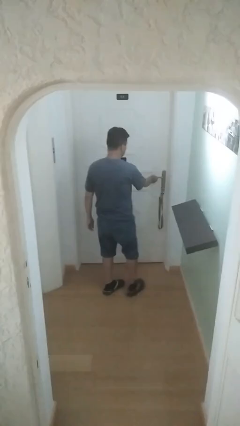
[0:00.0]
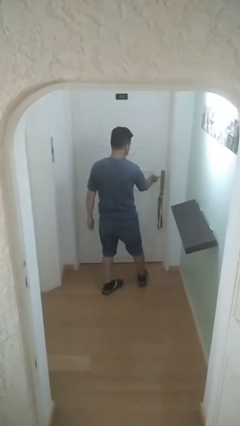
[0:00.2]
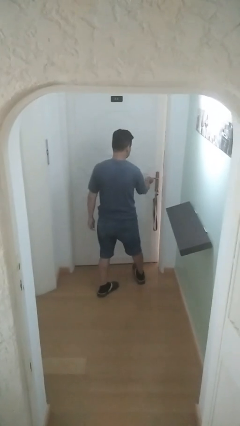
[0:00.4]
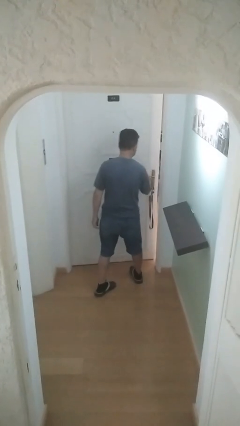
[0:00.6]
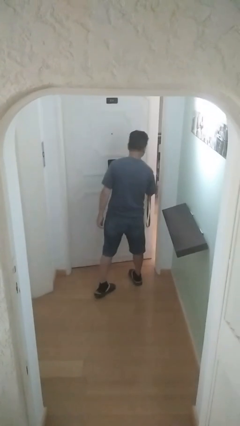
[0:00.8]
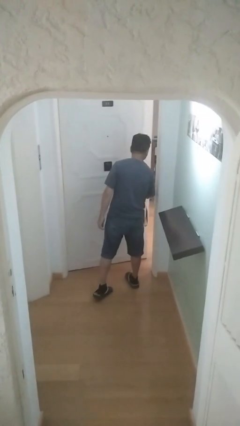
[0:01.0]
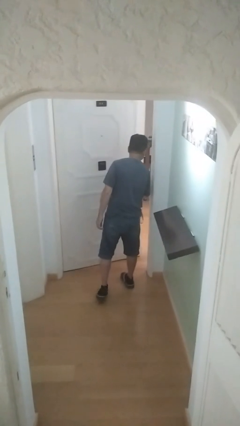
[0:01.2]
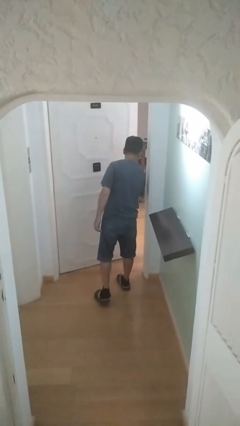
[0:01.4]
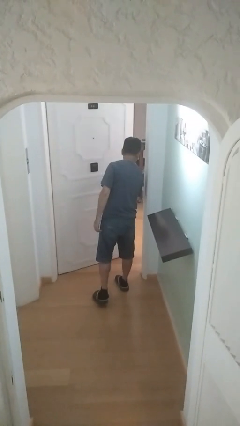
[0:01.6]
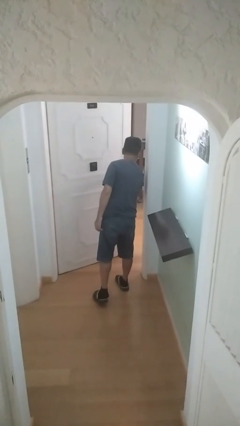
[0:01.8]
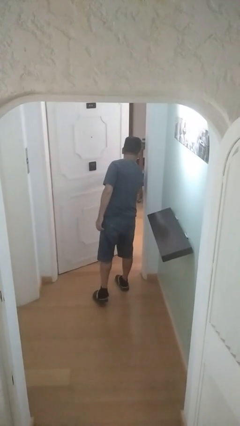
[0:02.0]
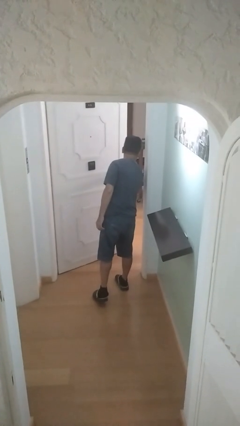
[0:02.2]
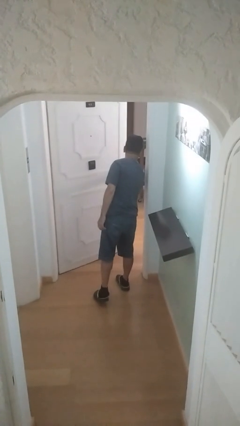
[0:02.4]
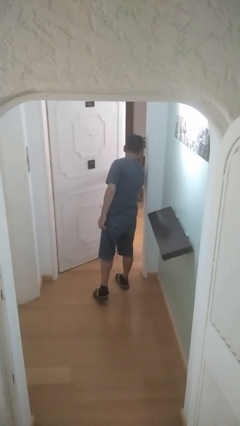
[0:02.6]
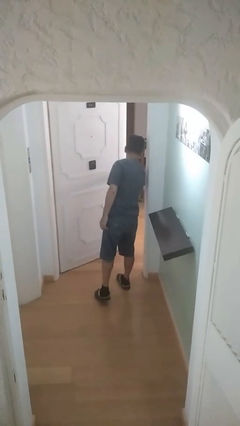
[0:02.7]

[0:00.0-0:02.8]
person opens facility door

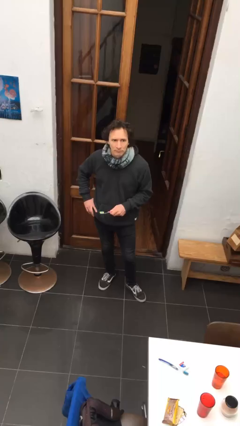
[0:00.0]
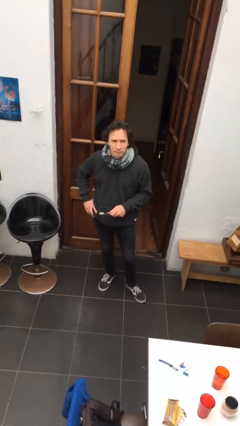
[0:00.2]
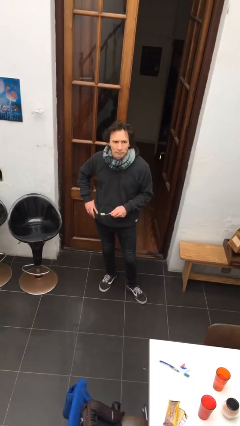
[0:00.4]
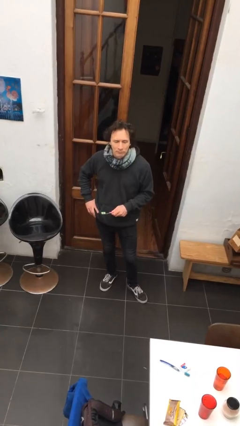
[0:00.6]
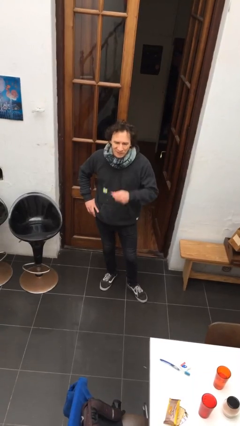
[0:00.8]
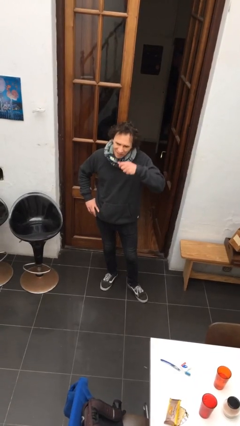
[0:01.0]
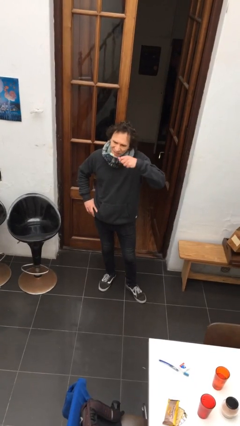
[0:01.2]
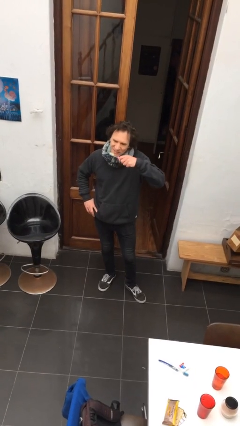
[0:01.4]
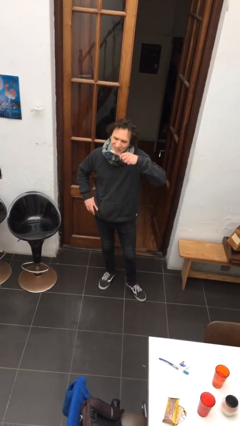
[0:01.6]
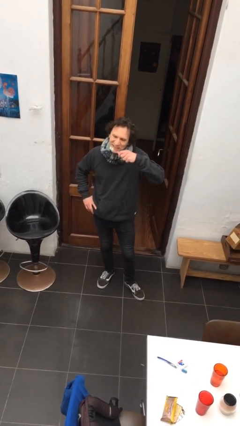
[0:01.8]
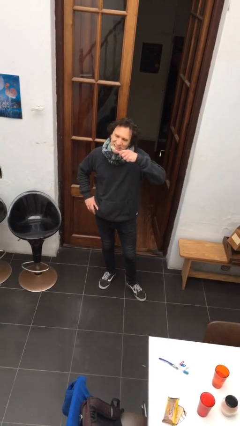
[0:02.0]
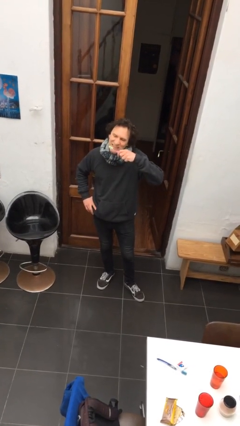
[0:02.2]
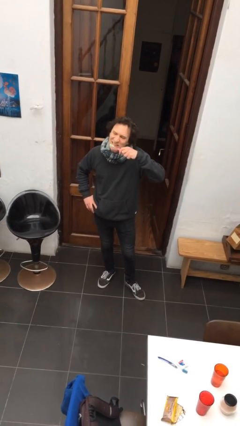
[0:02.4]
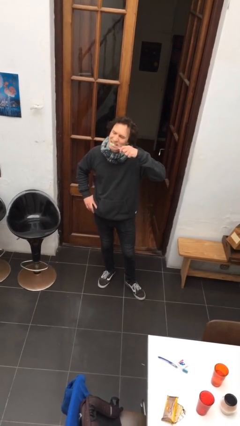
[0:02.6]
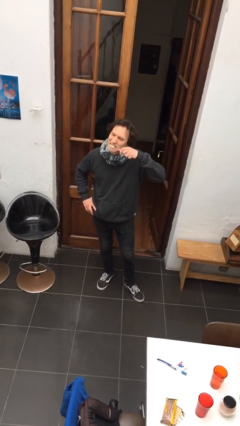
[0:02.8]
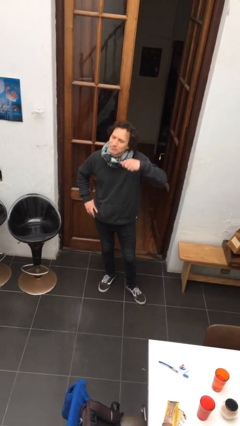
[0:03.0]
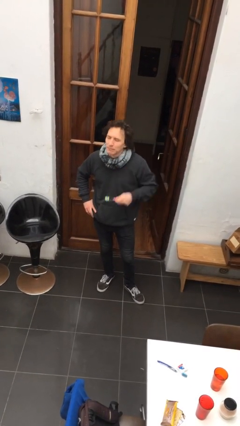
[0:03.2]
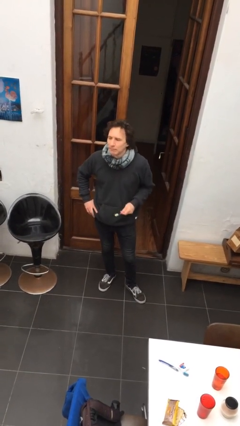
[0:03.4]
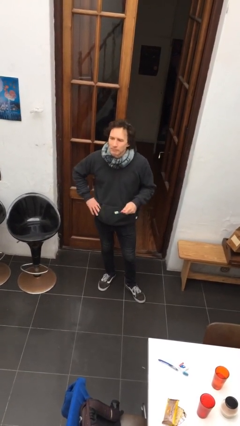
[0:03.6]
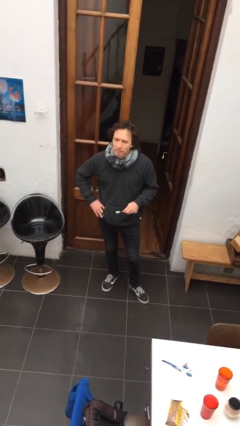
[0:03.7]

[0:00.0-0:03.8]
person brushes teeth

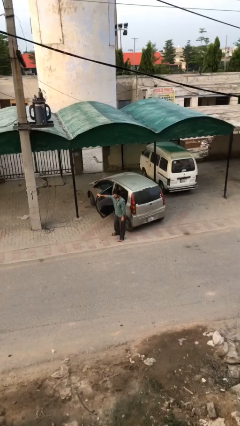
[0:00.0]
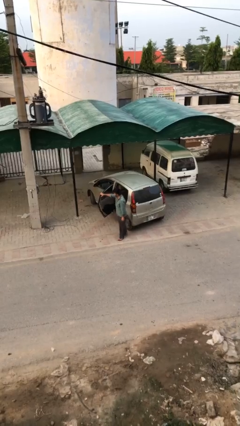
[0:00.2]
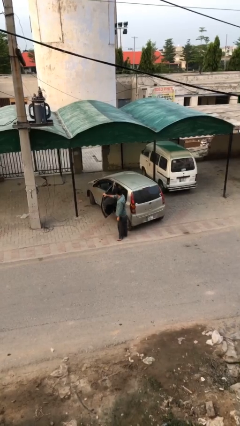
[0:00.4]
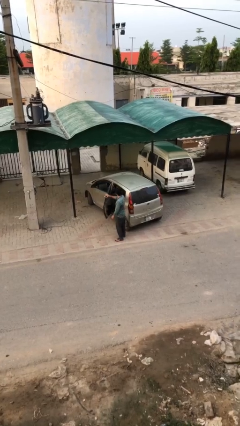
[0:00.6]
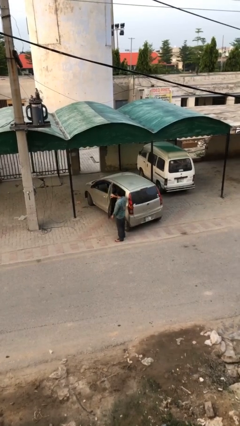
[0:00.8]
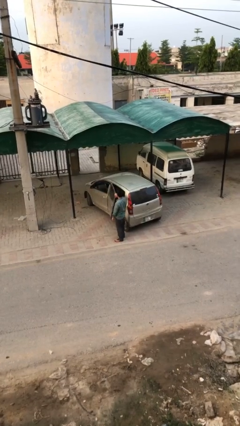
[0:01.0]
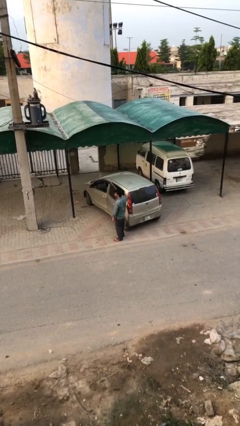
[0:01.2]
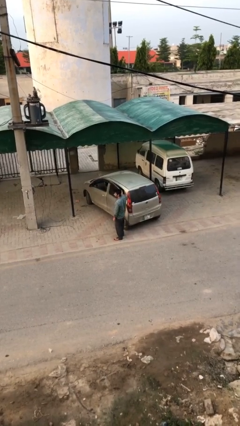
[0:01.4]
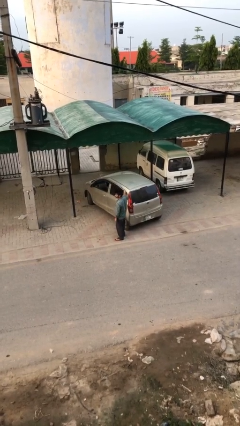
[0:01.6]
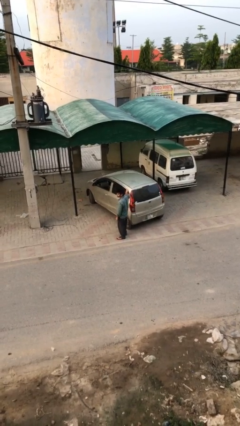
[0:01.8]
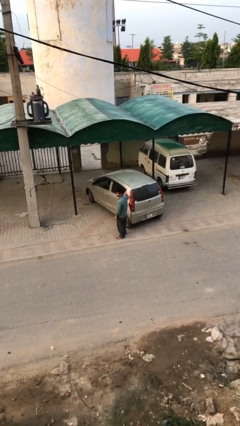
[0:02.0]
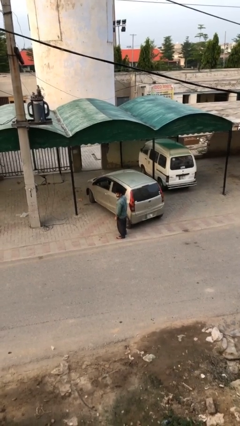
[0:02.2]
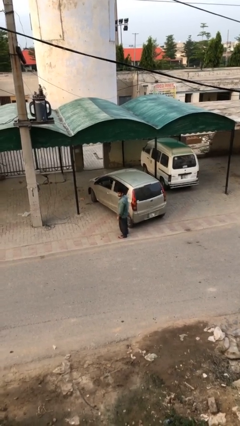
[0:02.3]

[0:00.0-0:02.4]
person closes car door

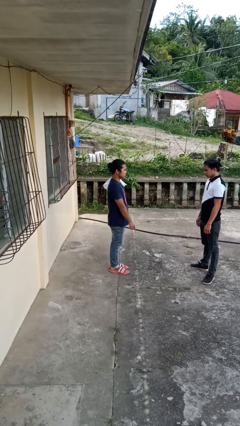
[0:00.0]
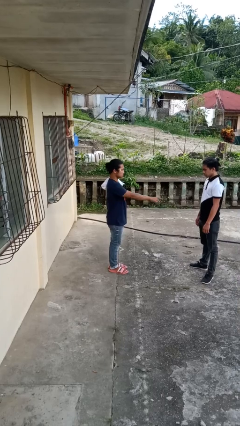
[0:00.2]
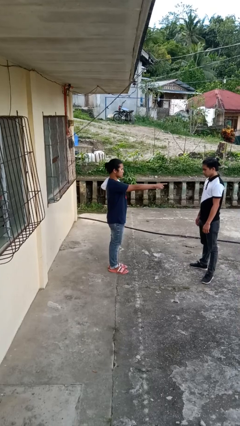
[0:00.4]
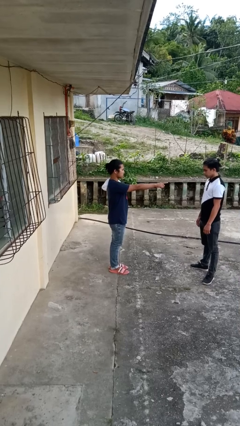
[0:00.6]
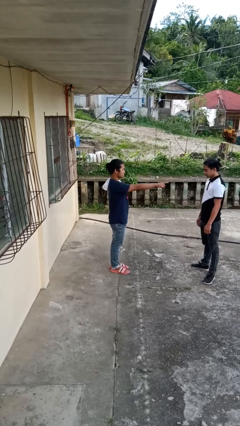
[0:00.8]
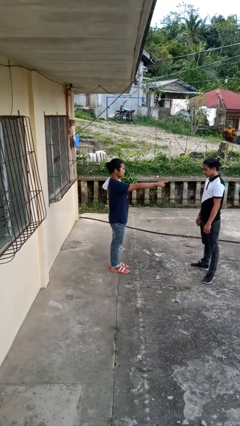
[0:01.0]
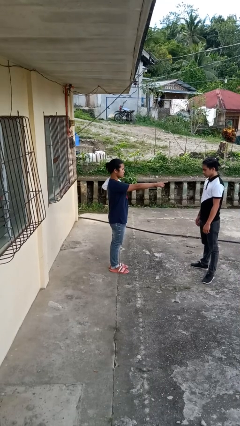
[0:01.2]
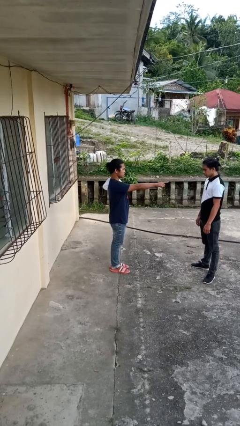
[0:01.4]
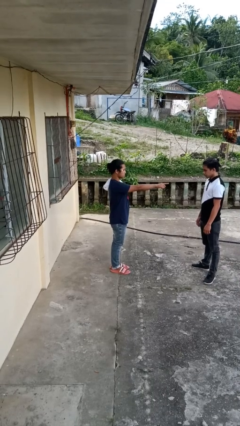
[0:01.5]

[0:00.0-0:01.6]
person points at person

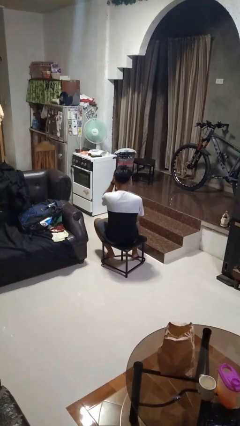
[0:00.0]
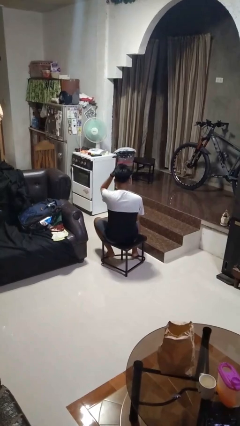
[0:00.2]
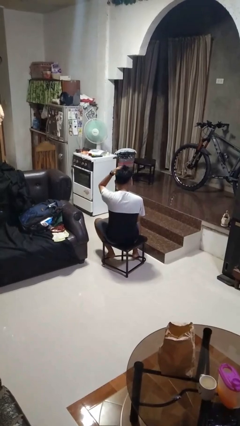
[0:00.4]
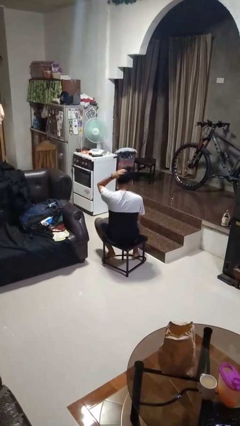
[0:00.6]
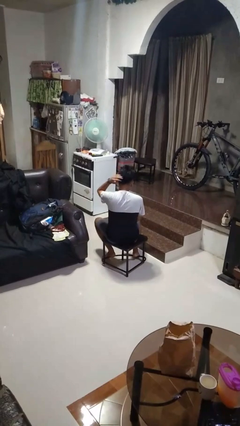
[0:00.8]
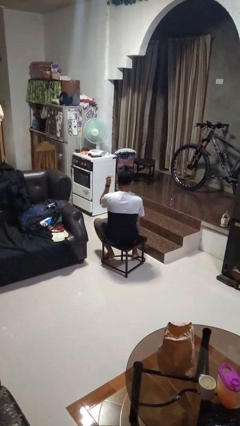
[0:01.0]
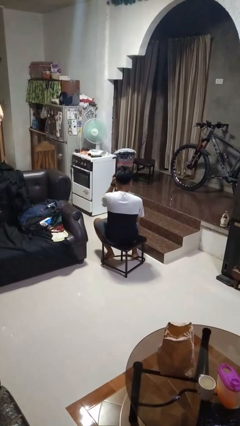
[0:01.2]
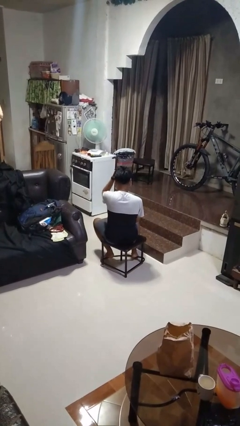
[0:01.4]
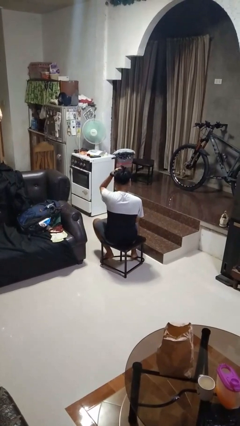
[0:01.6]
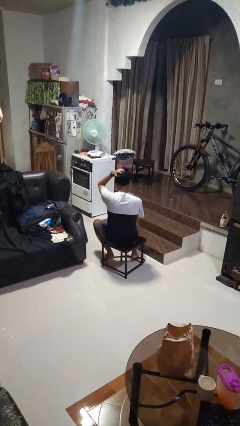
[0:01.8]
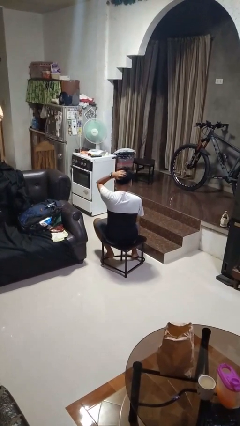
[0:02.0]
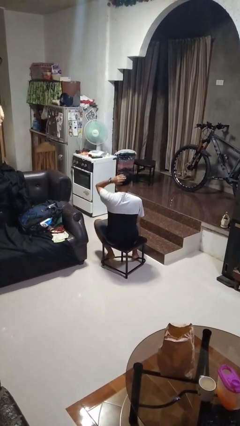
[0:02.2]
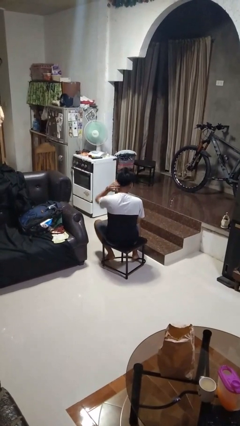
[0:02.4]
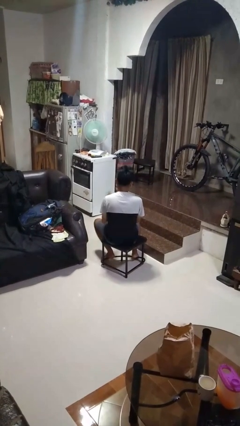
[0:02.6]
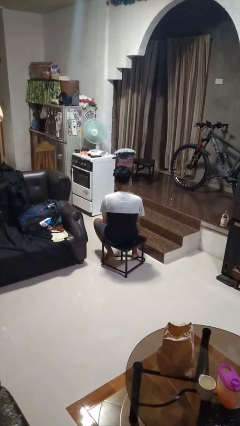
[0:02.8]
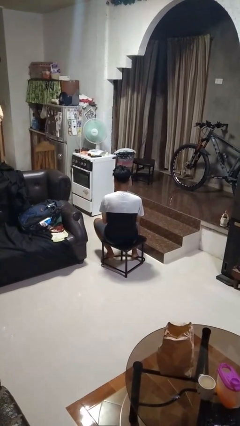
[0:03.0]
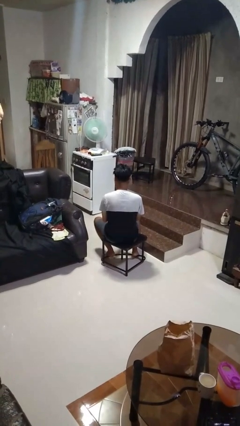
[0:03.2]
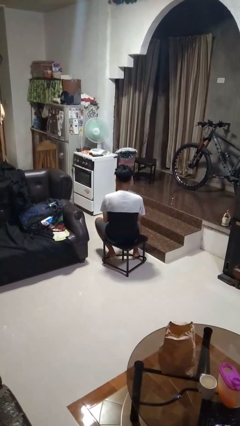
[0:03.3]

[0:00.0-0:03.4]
person strokes hair

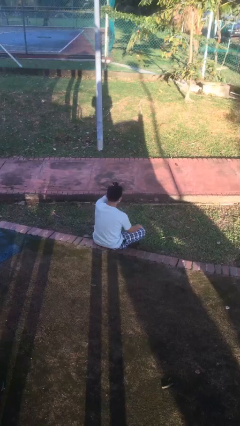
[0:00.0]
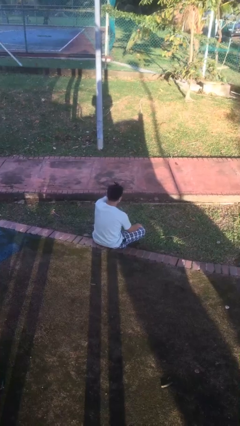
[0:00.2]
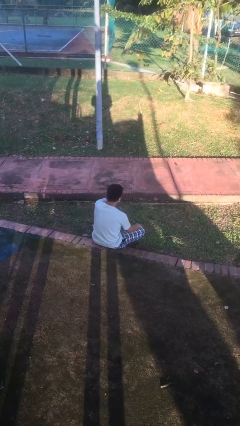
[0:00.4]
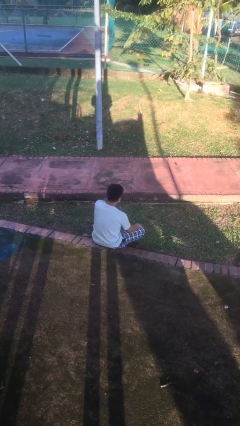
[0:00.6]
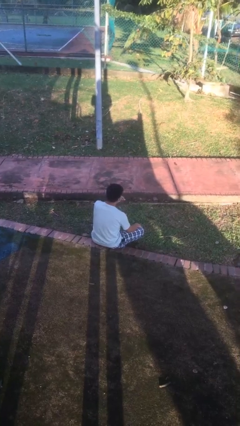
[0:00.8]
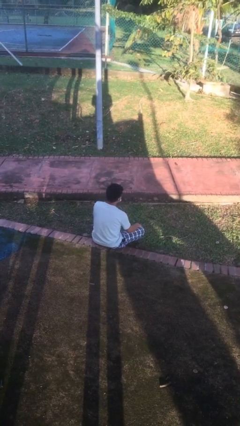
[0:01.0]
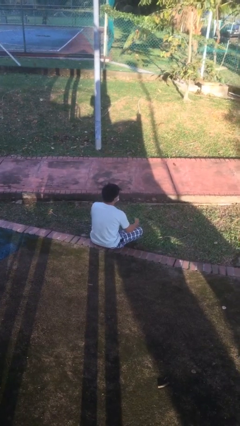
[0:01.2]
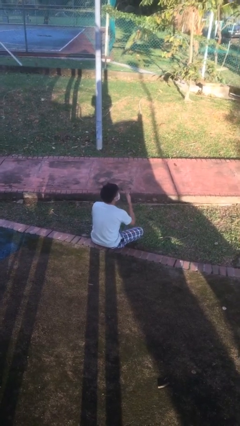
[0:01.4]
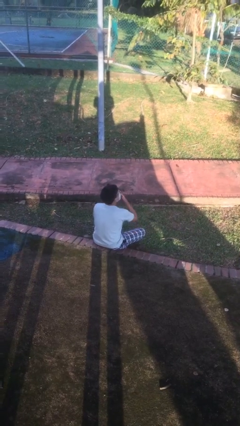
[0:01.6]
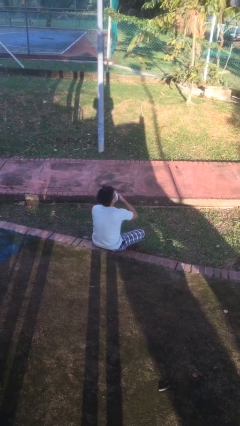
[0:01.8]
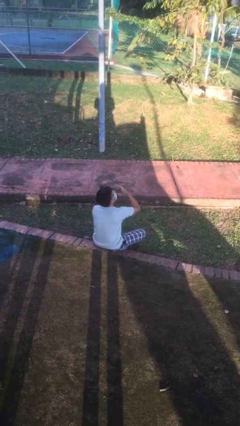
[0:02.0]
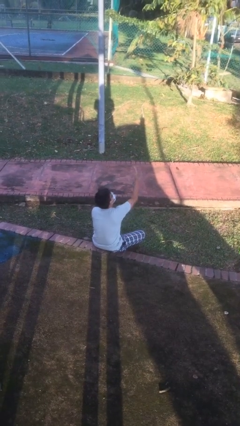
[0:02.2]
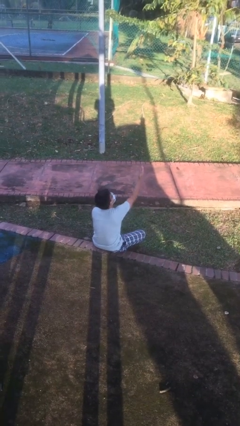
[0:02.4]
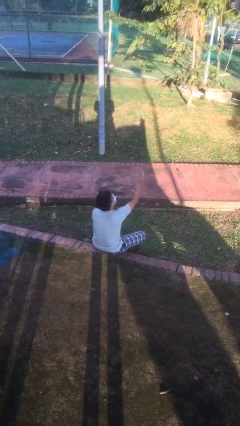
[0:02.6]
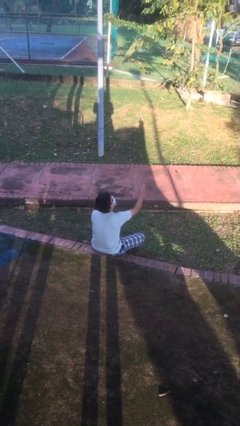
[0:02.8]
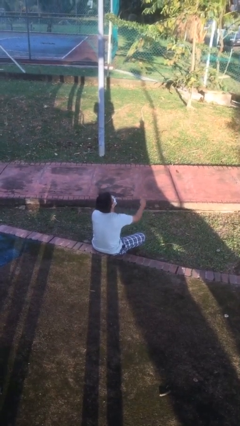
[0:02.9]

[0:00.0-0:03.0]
person gestures blow kiss

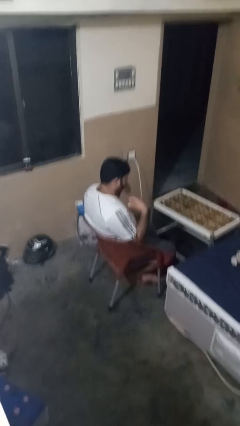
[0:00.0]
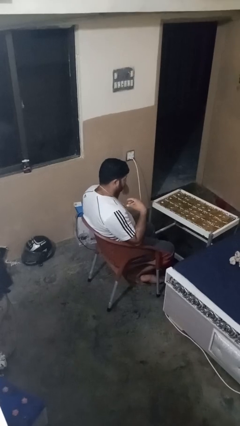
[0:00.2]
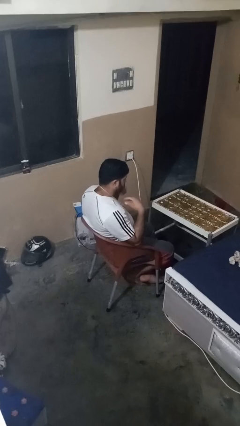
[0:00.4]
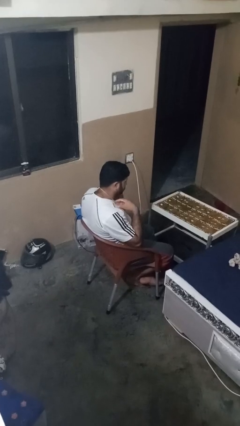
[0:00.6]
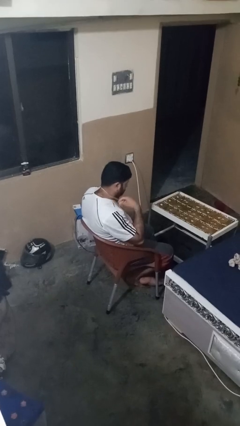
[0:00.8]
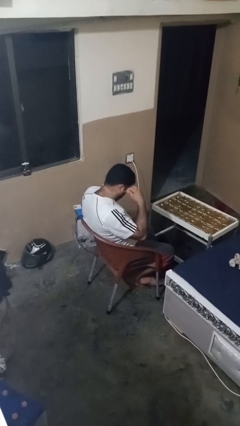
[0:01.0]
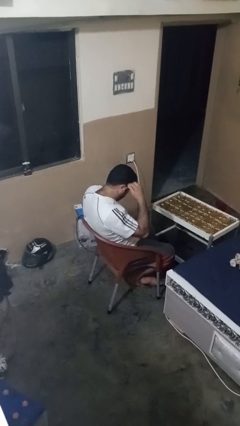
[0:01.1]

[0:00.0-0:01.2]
person takes off necklace
